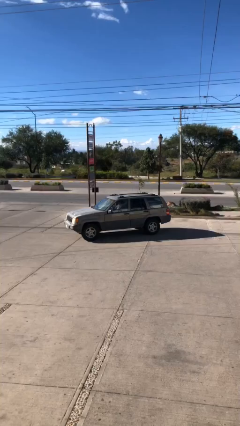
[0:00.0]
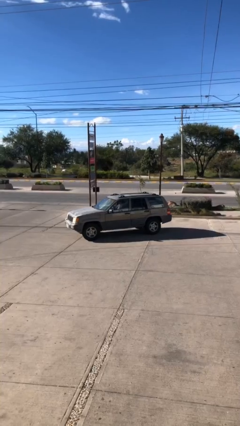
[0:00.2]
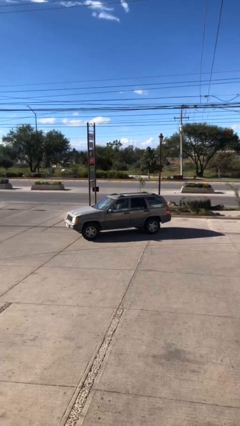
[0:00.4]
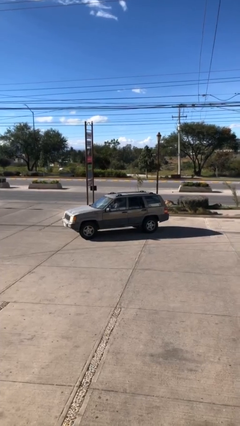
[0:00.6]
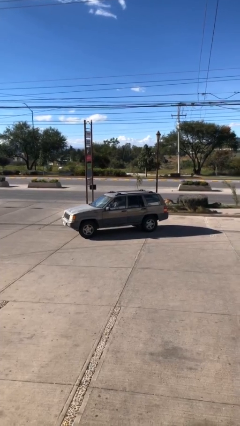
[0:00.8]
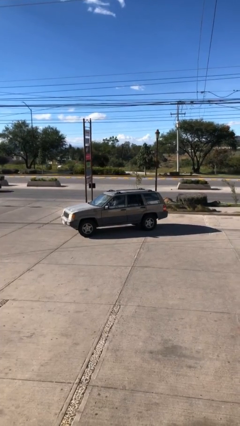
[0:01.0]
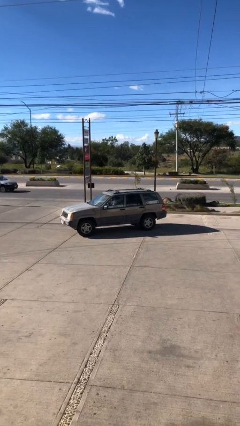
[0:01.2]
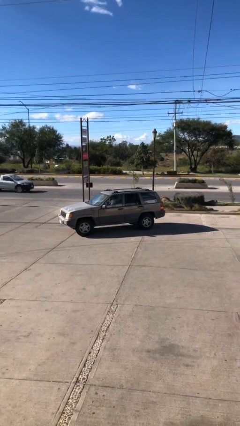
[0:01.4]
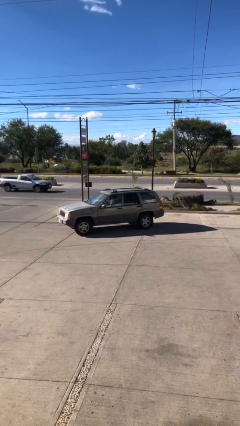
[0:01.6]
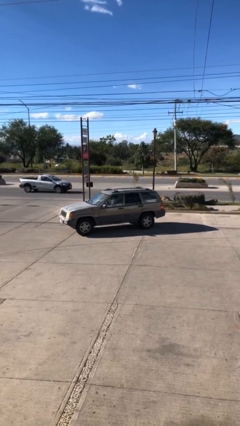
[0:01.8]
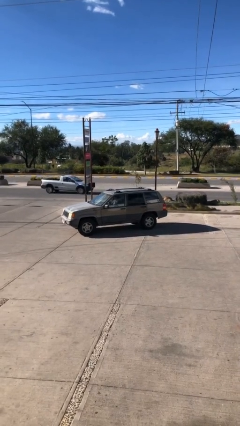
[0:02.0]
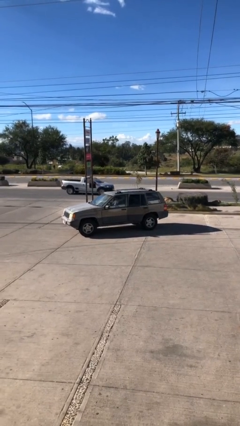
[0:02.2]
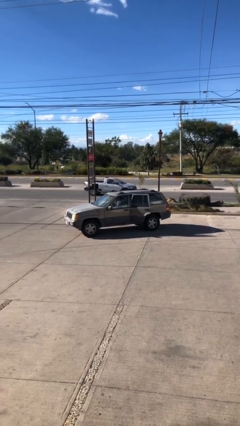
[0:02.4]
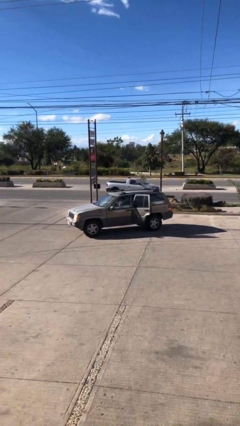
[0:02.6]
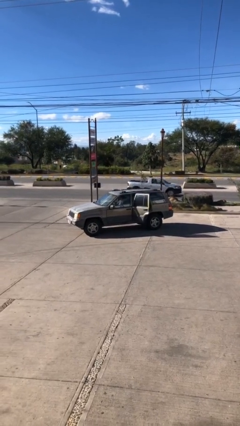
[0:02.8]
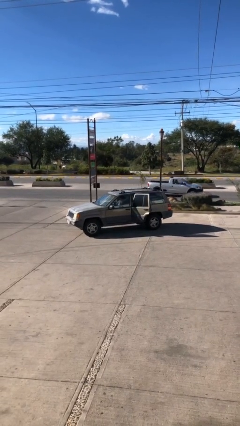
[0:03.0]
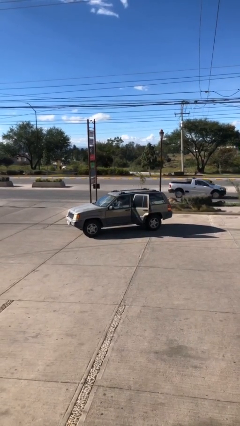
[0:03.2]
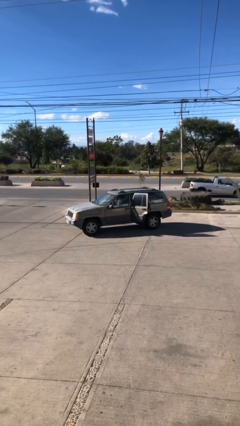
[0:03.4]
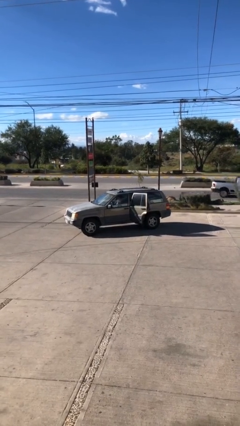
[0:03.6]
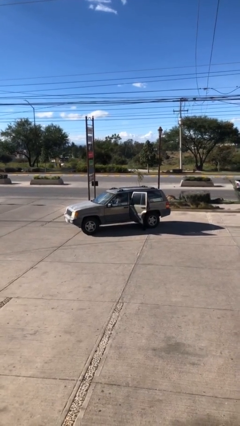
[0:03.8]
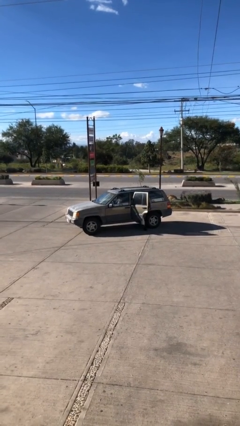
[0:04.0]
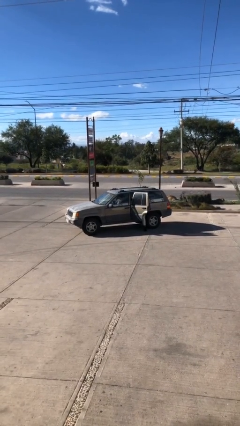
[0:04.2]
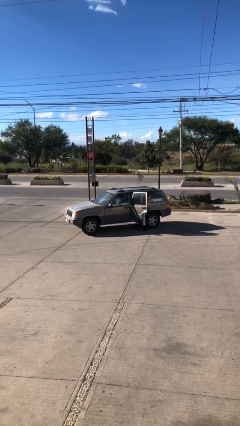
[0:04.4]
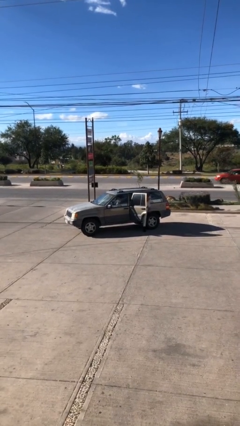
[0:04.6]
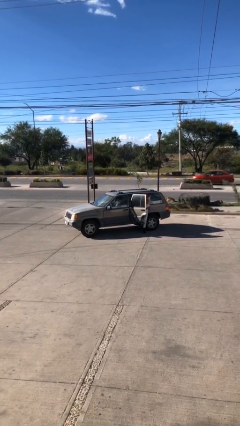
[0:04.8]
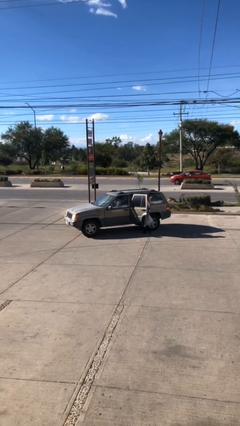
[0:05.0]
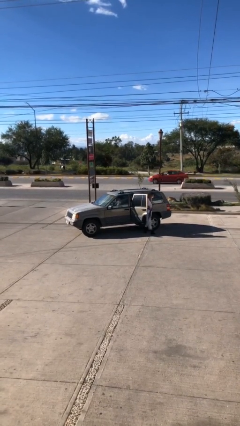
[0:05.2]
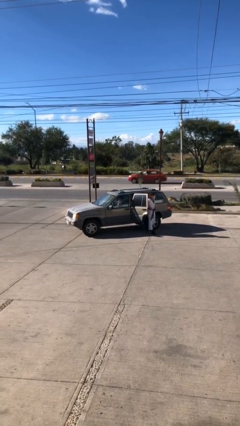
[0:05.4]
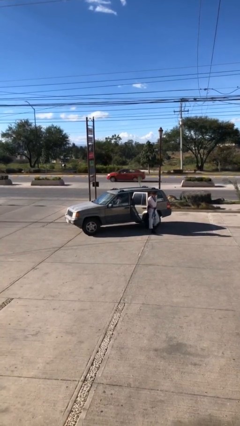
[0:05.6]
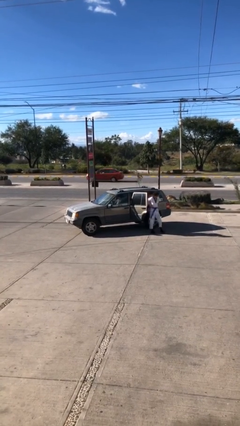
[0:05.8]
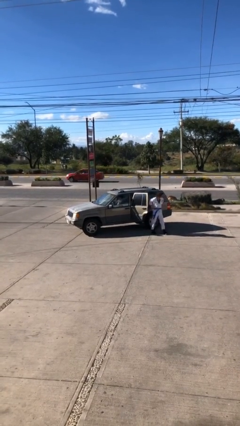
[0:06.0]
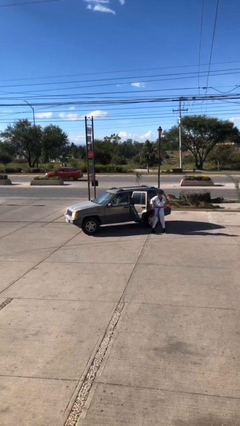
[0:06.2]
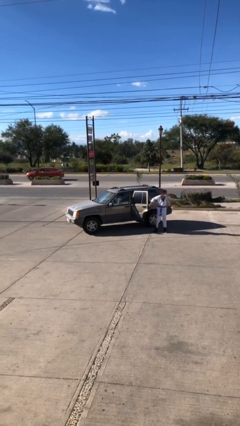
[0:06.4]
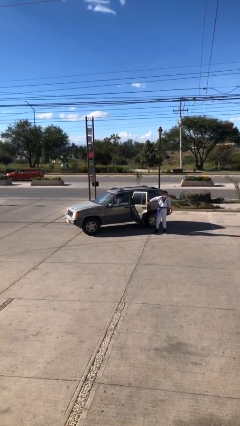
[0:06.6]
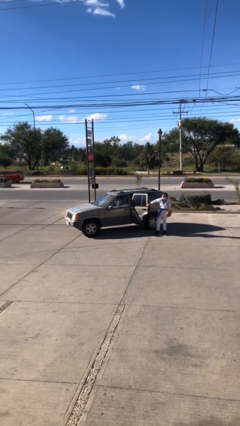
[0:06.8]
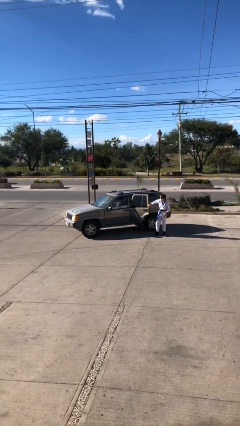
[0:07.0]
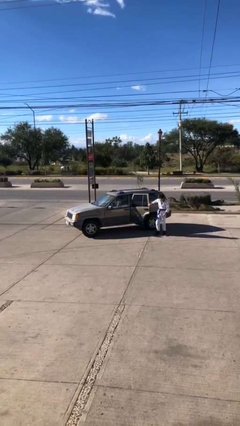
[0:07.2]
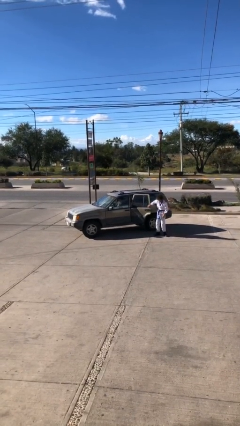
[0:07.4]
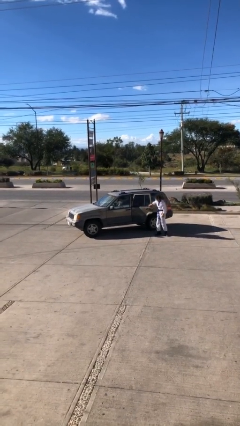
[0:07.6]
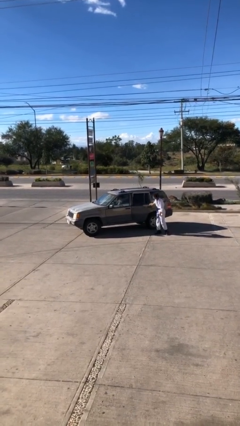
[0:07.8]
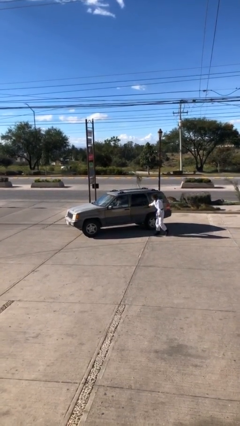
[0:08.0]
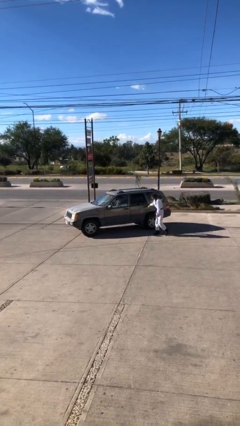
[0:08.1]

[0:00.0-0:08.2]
car drops off person

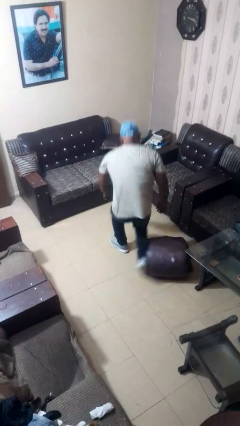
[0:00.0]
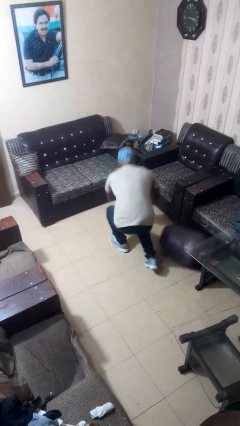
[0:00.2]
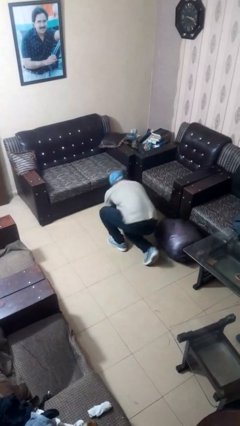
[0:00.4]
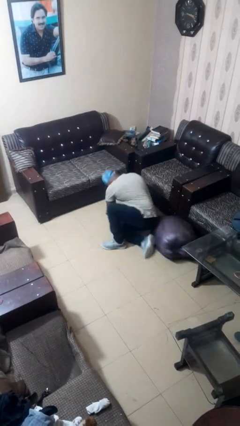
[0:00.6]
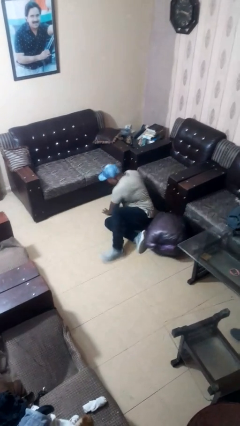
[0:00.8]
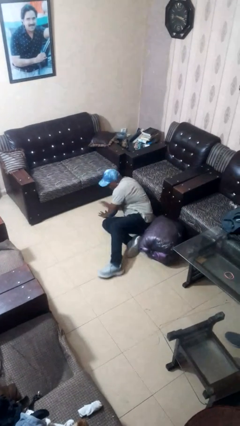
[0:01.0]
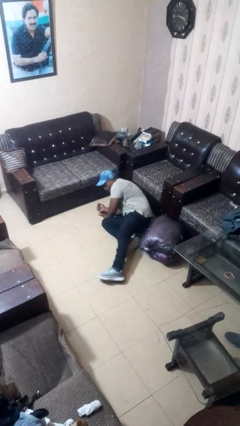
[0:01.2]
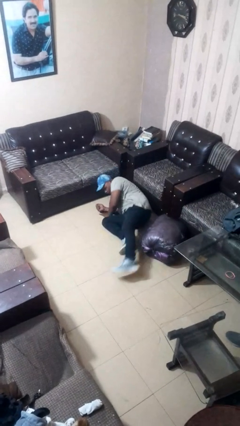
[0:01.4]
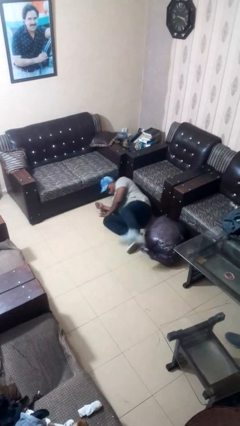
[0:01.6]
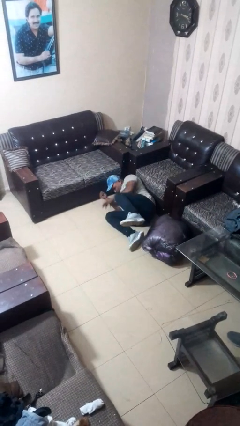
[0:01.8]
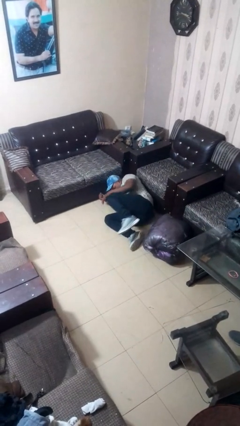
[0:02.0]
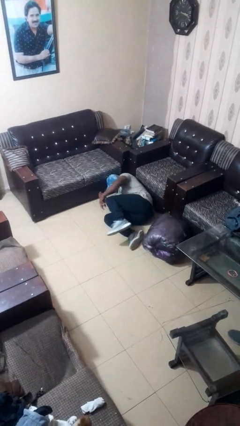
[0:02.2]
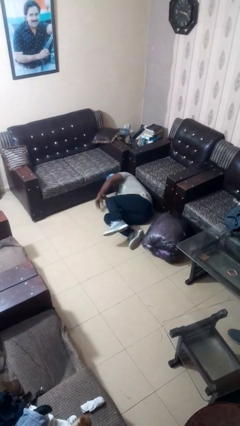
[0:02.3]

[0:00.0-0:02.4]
person lies down on floor

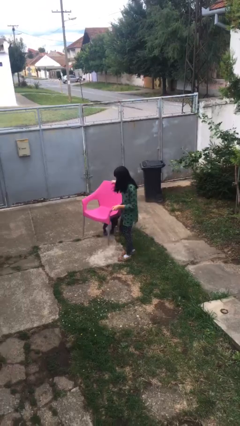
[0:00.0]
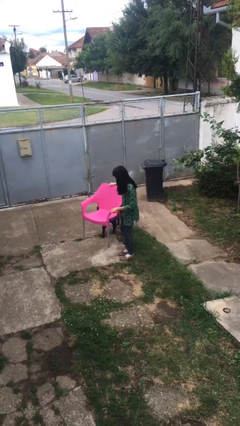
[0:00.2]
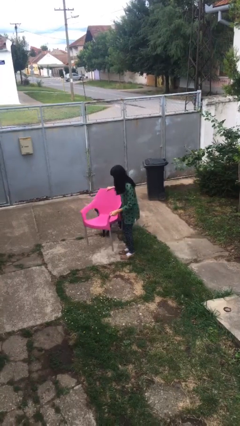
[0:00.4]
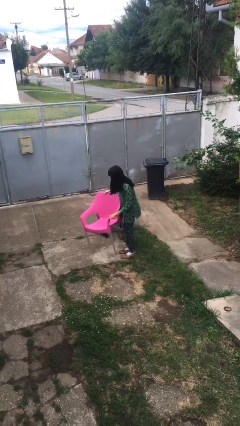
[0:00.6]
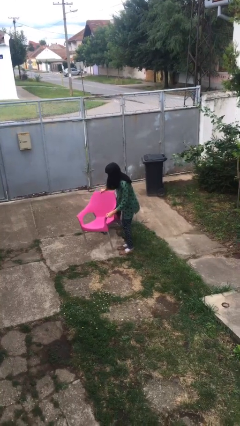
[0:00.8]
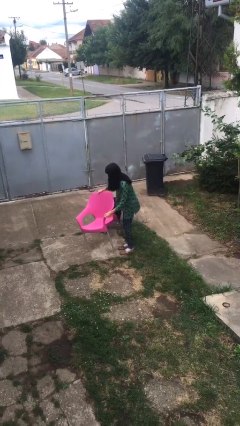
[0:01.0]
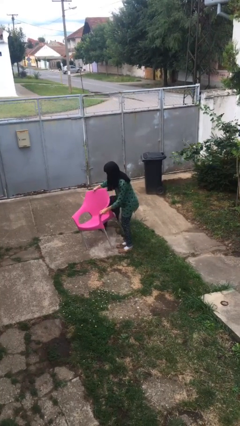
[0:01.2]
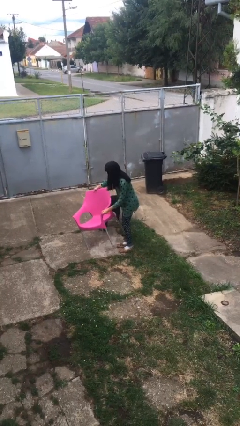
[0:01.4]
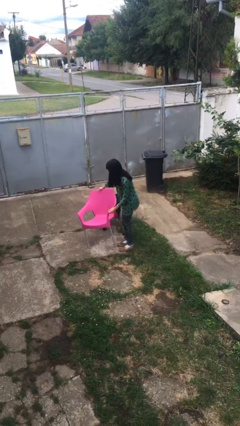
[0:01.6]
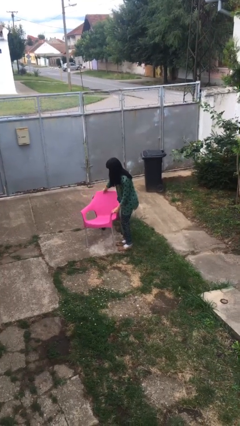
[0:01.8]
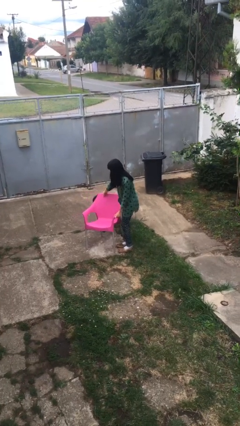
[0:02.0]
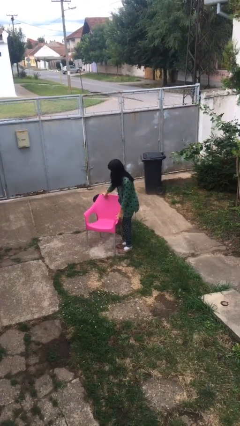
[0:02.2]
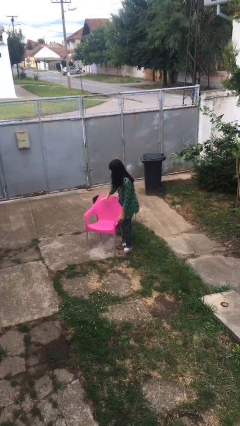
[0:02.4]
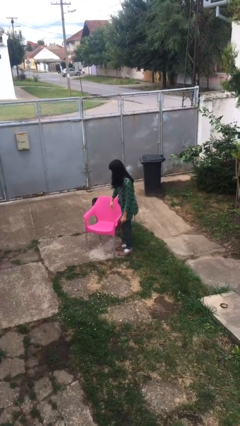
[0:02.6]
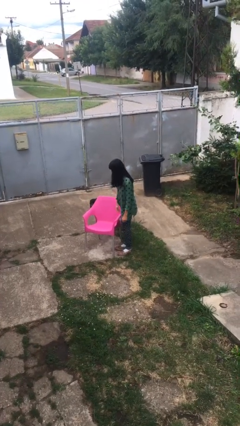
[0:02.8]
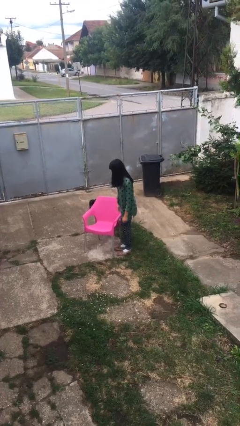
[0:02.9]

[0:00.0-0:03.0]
person puts down object on floor

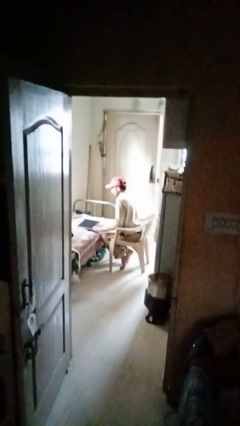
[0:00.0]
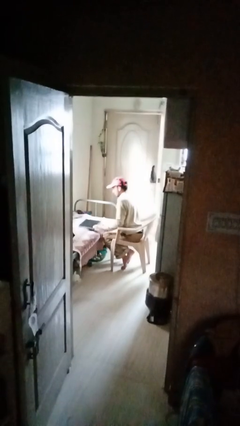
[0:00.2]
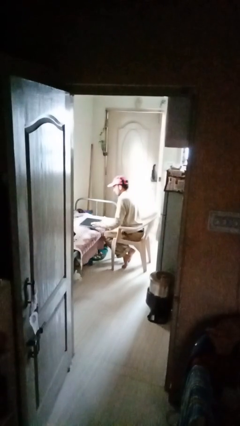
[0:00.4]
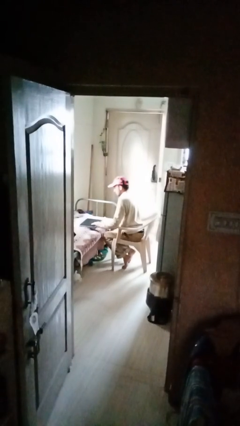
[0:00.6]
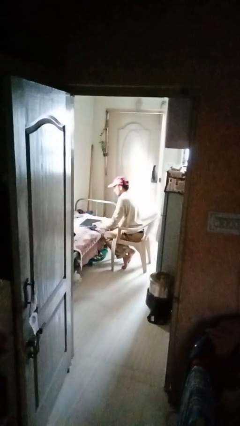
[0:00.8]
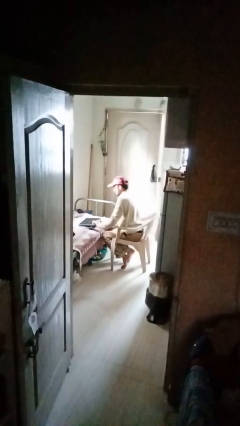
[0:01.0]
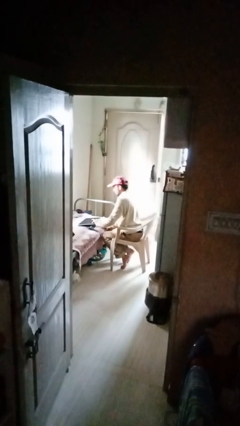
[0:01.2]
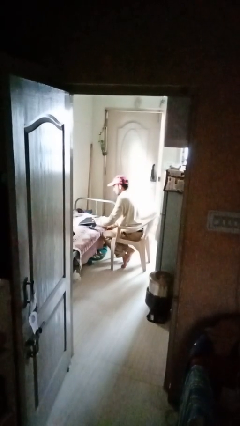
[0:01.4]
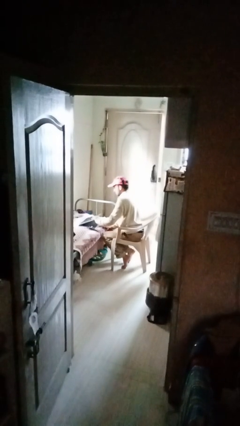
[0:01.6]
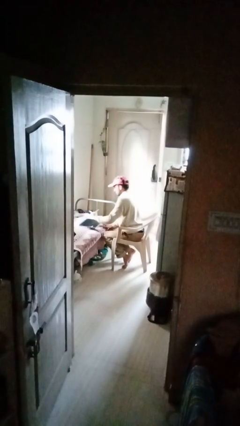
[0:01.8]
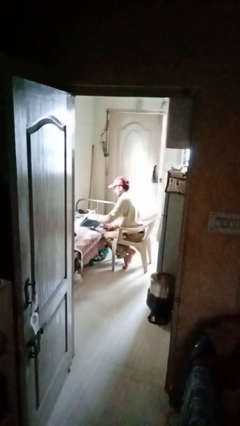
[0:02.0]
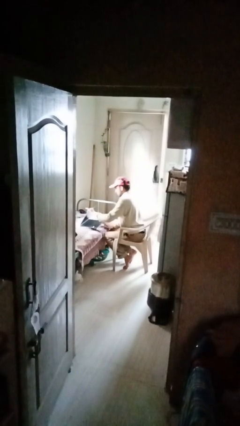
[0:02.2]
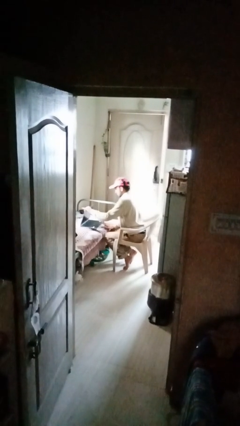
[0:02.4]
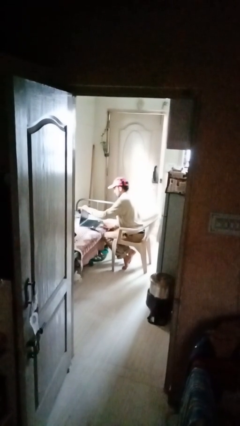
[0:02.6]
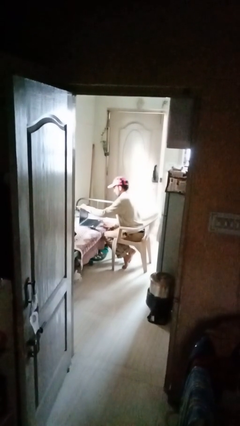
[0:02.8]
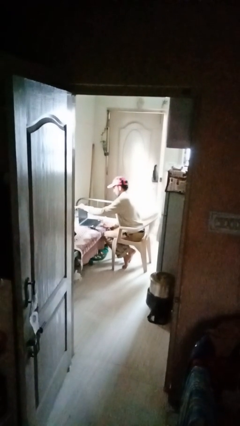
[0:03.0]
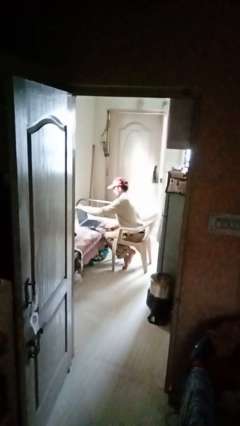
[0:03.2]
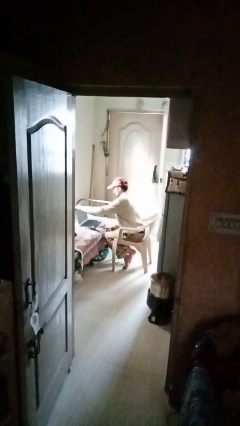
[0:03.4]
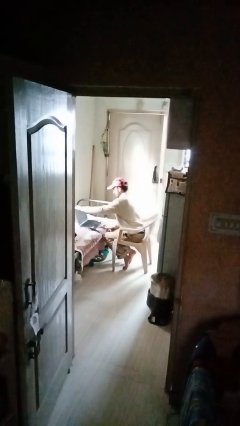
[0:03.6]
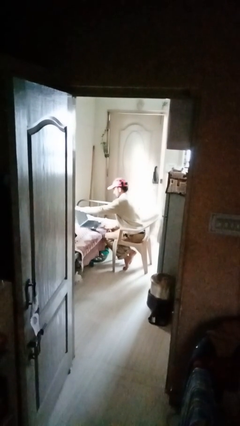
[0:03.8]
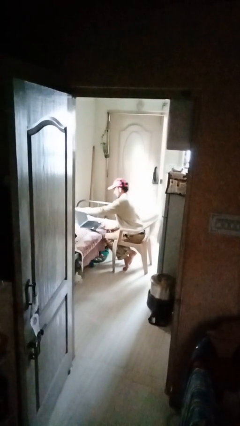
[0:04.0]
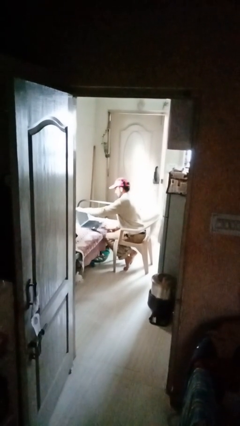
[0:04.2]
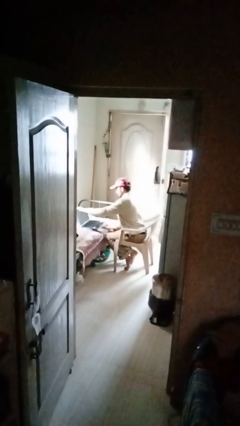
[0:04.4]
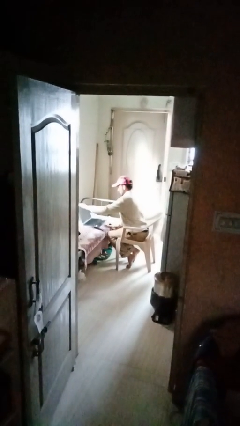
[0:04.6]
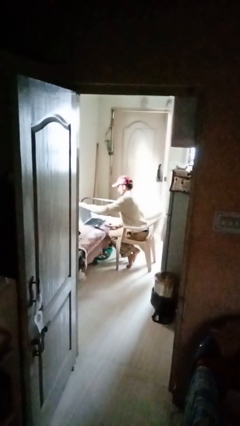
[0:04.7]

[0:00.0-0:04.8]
person opens laptop
